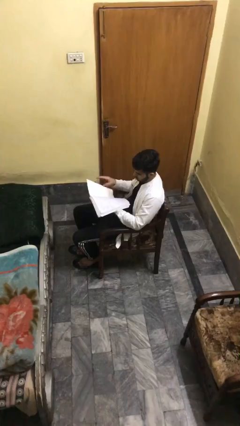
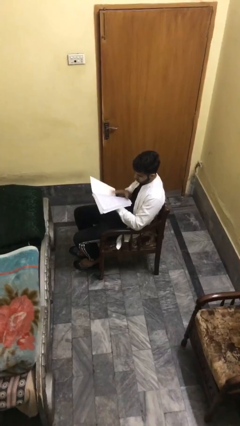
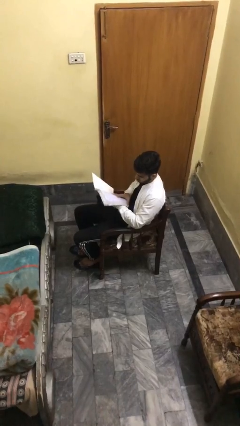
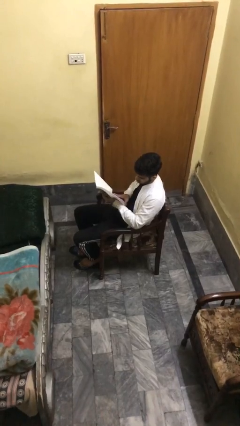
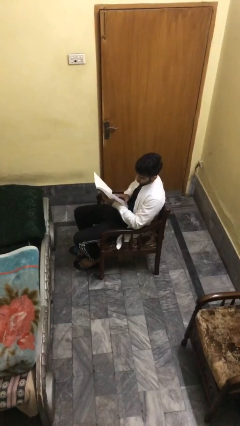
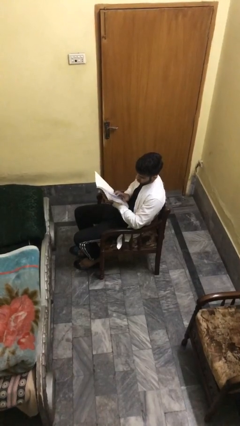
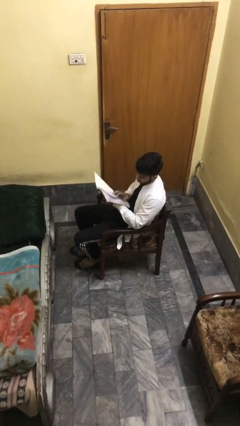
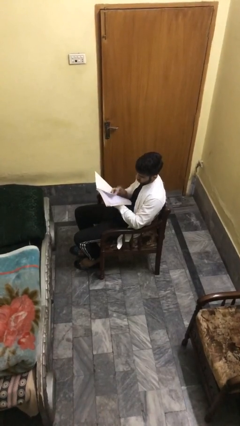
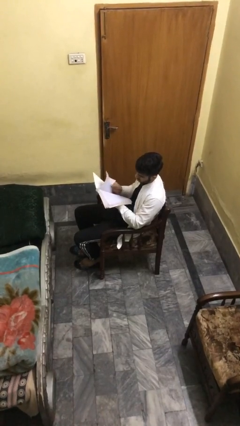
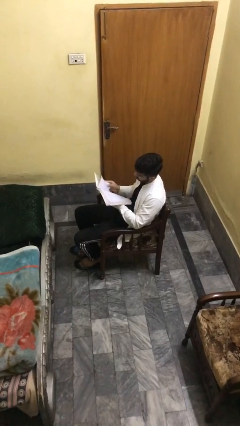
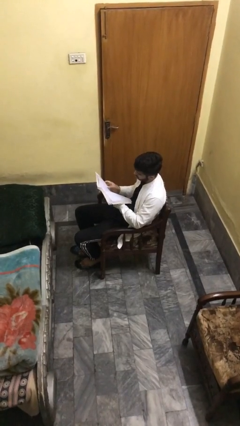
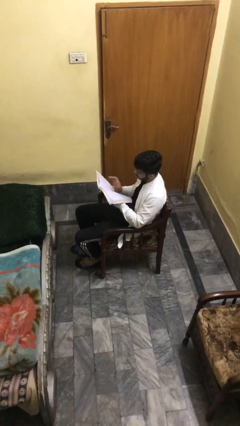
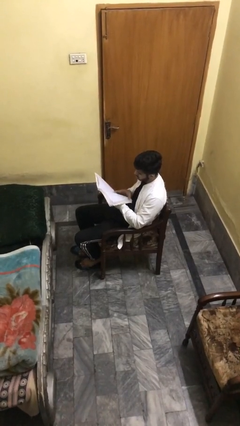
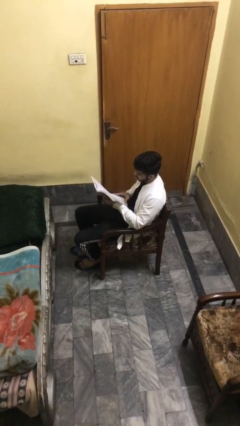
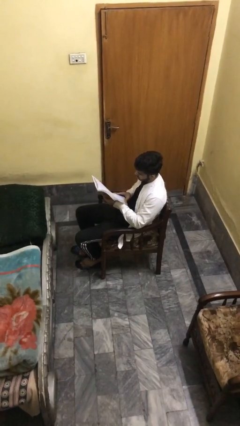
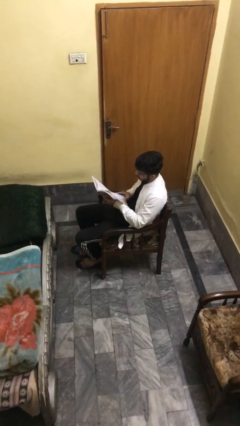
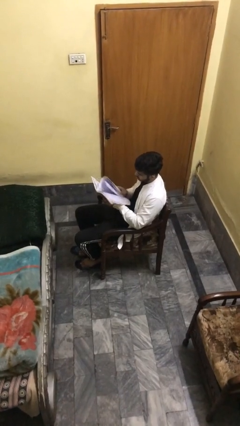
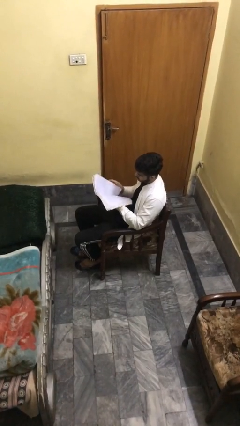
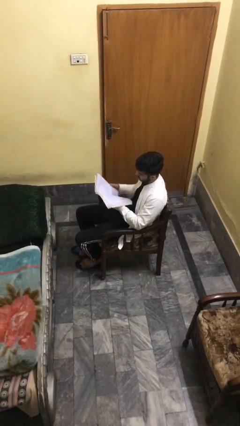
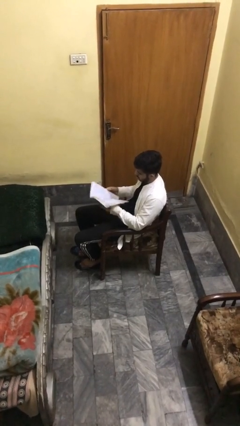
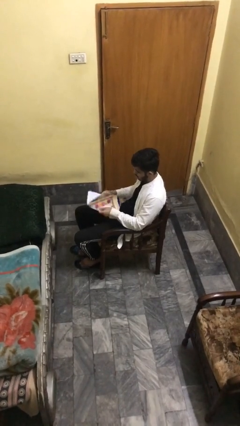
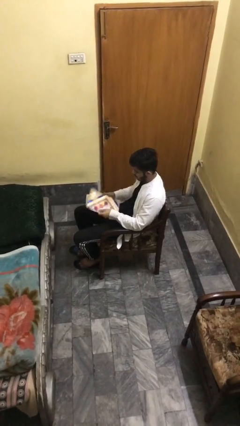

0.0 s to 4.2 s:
person reads document

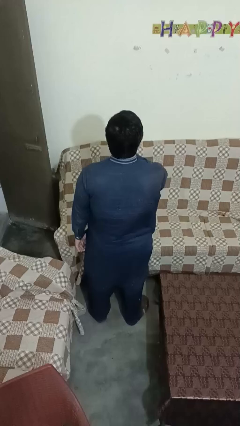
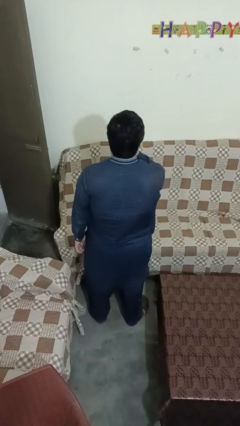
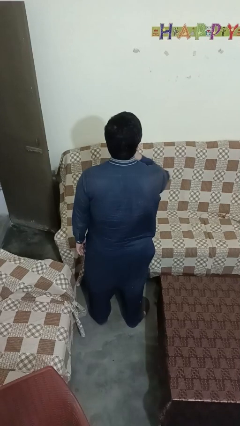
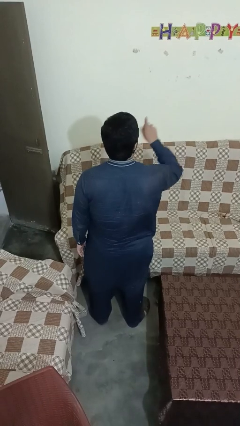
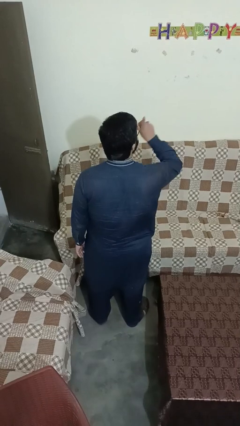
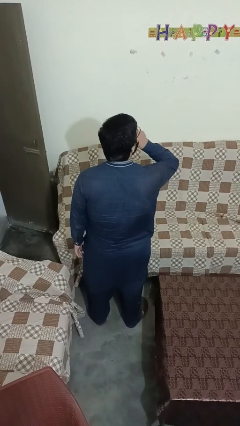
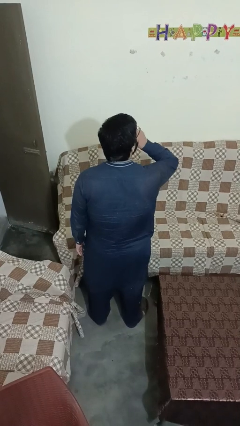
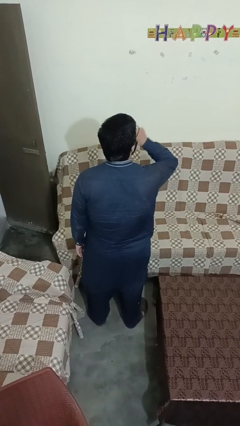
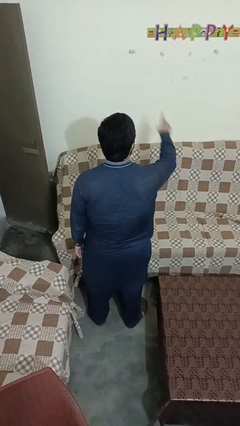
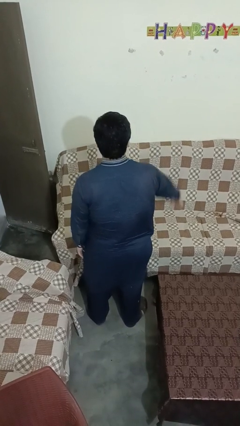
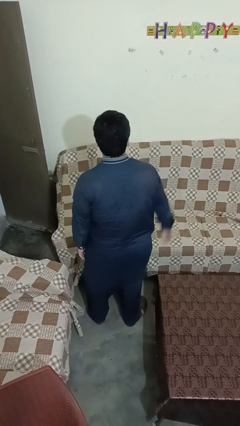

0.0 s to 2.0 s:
person gestures be quiet

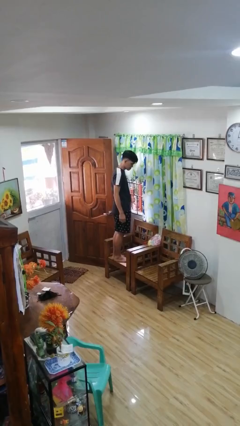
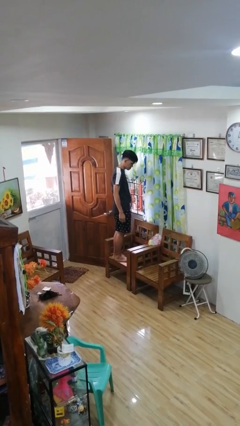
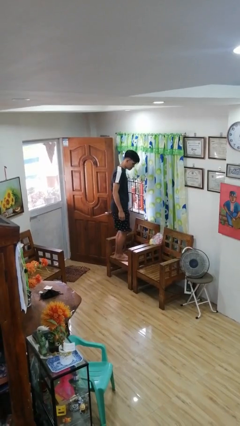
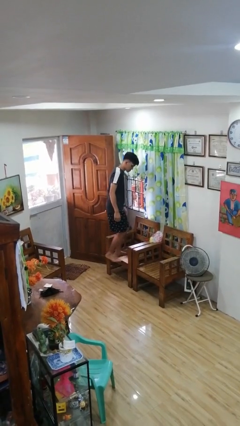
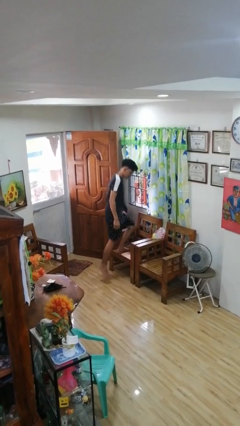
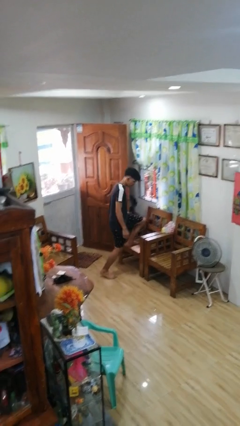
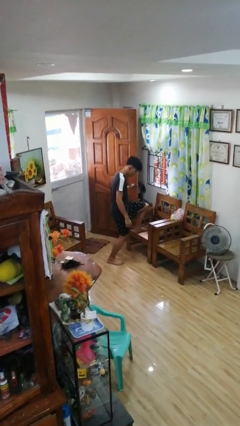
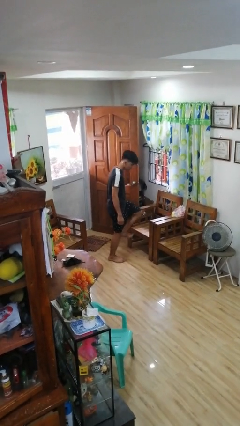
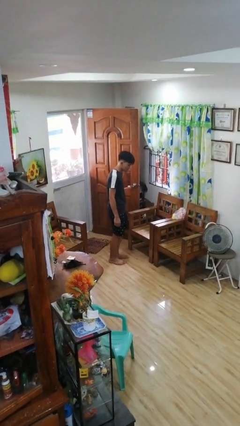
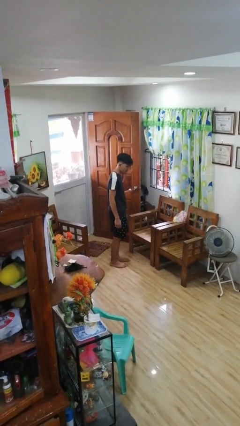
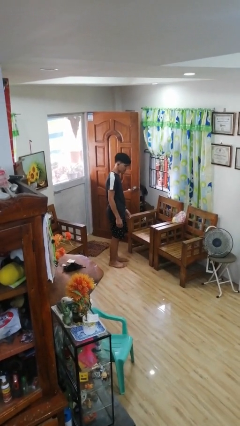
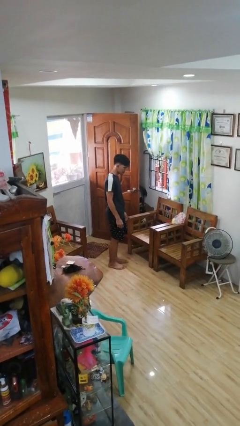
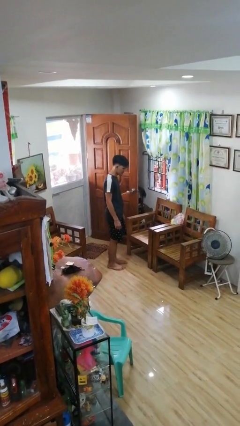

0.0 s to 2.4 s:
person climbs off chair

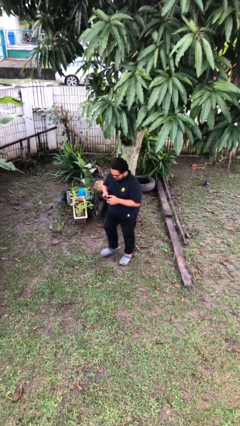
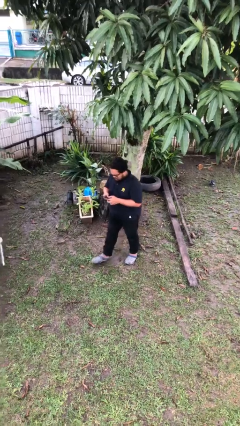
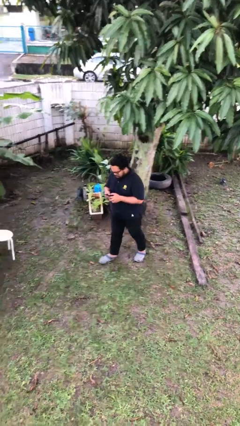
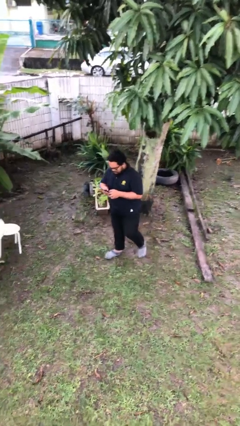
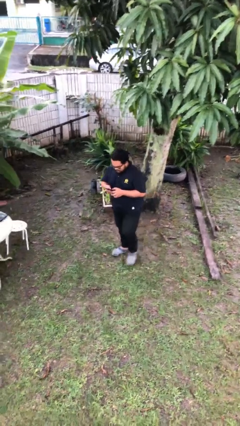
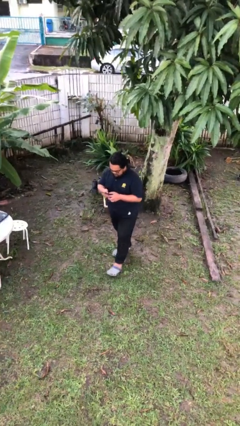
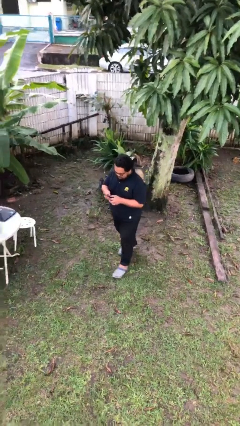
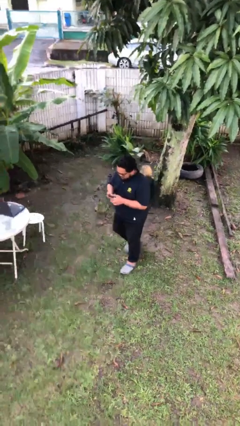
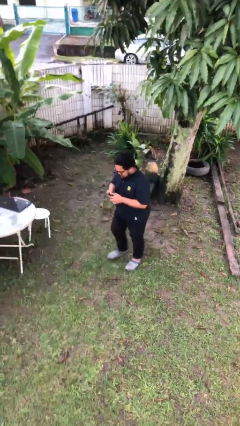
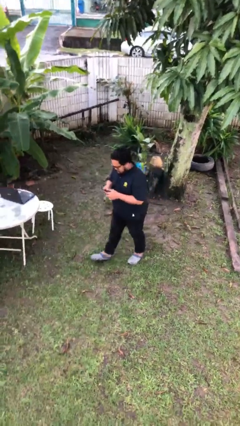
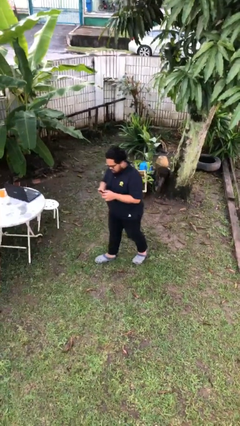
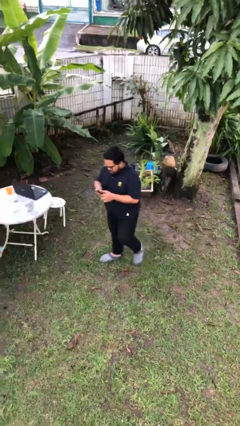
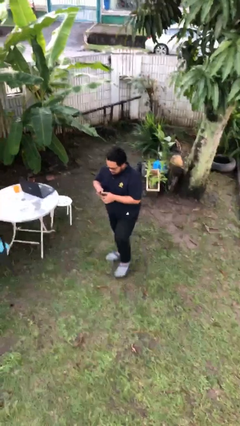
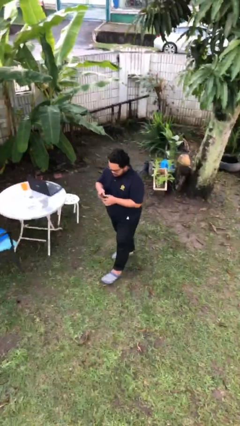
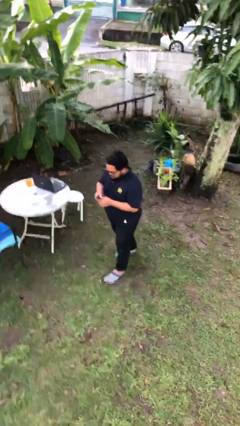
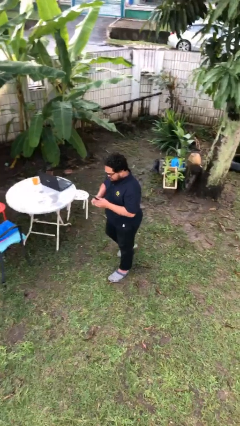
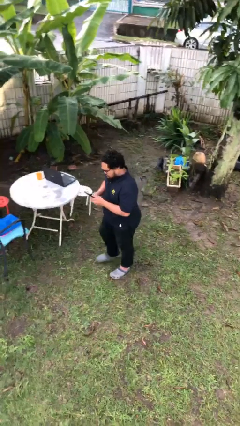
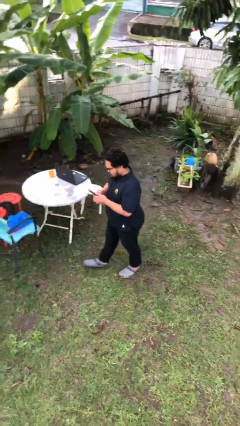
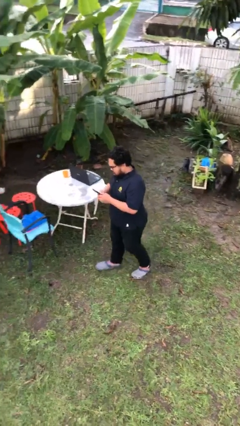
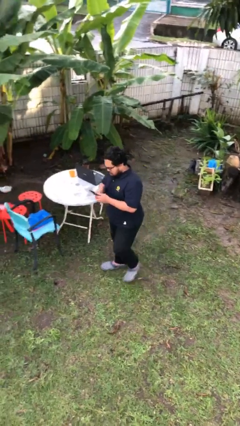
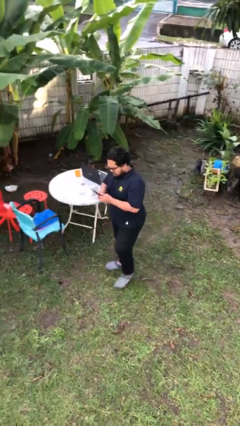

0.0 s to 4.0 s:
person texts on phone

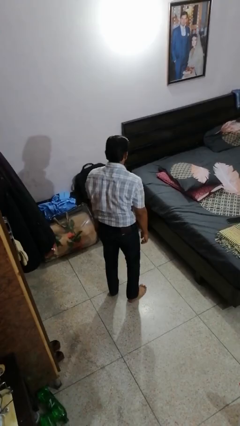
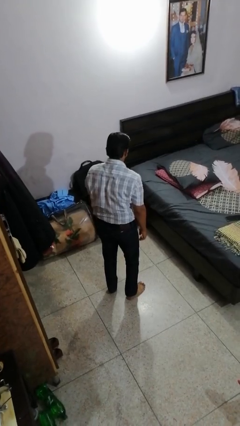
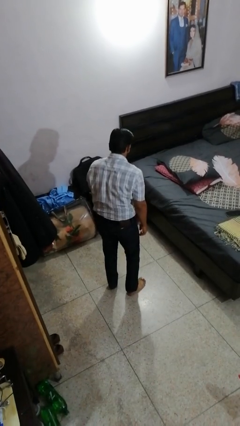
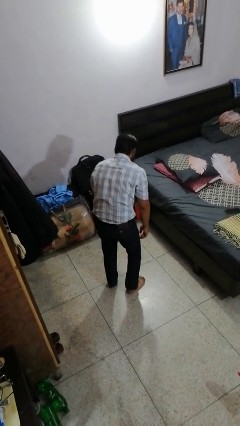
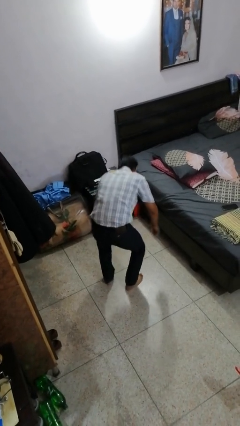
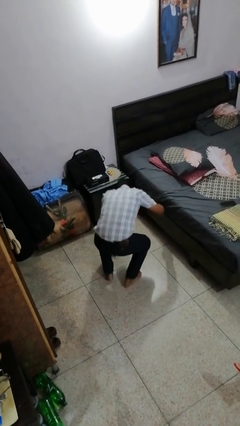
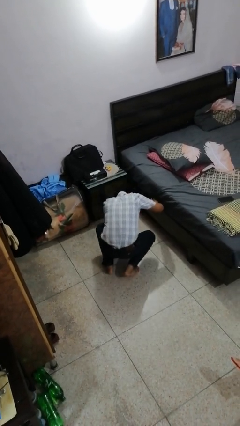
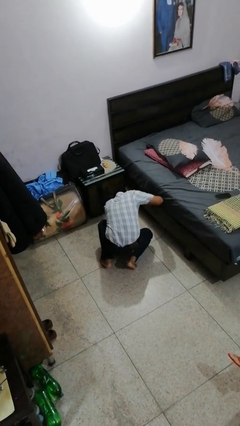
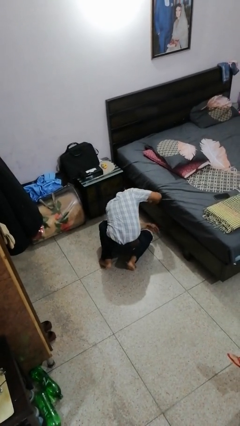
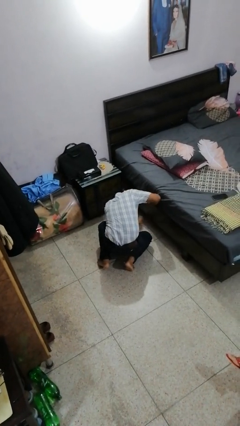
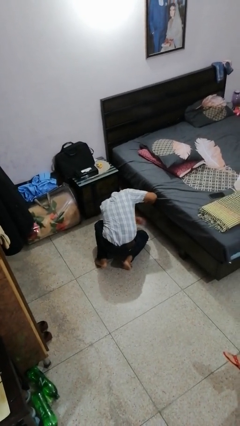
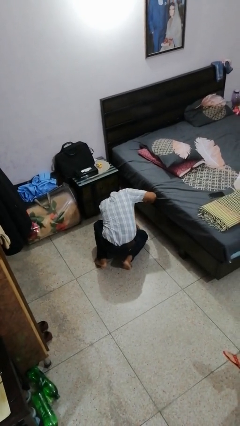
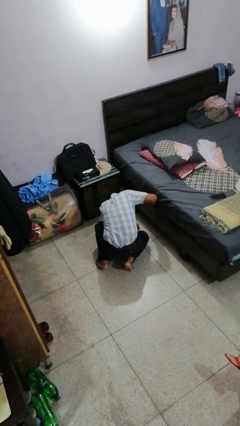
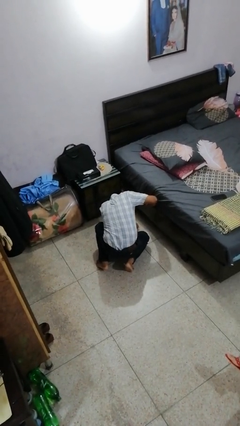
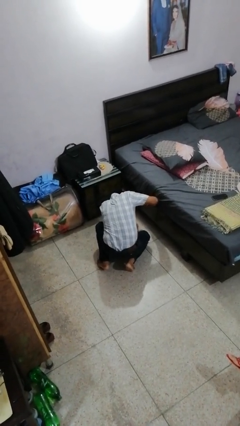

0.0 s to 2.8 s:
person searches under bed

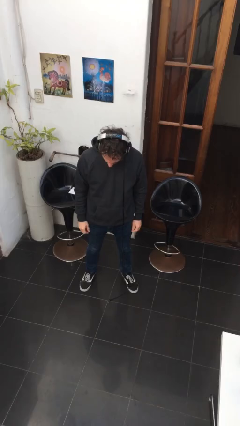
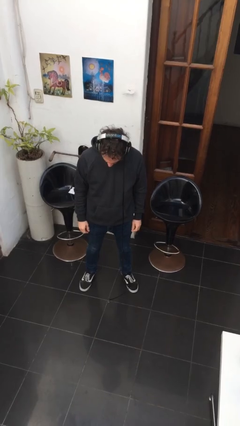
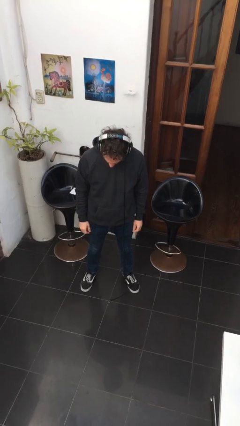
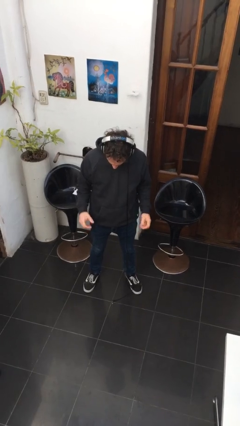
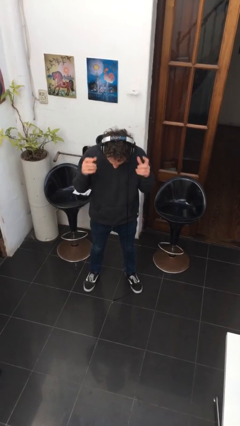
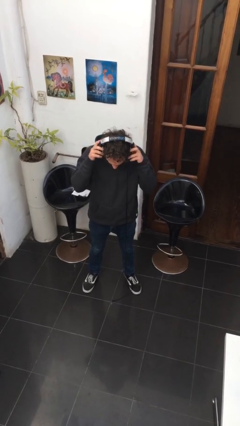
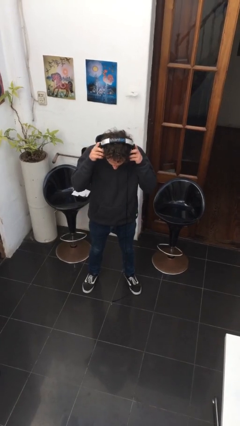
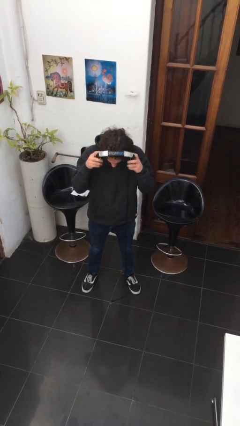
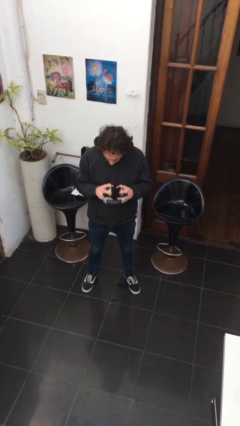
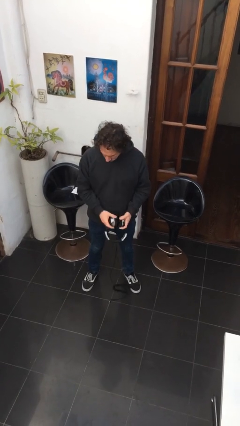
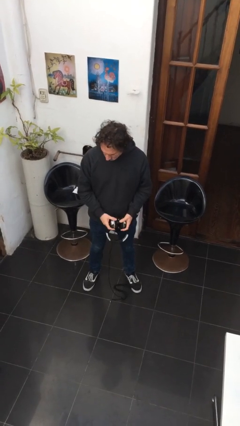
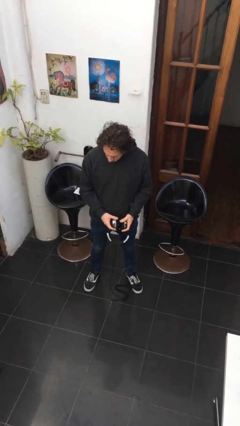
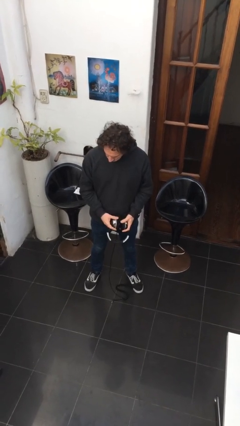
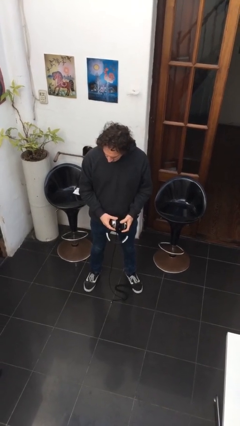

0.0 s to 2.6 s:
person takes off headphones
